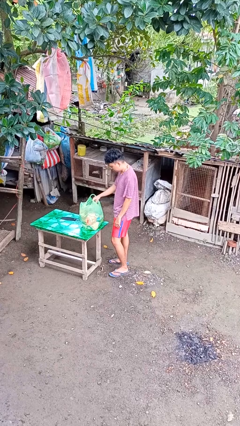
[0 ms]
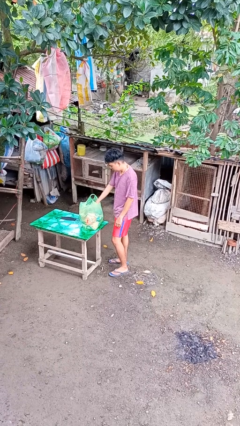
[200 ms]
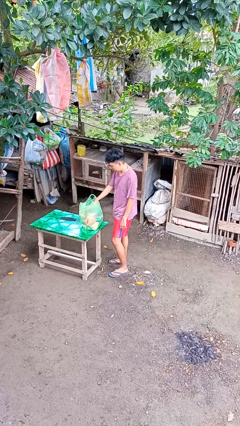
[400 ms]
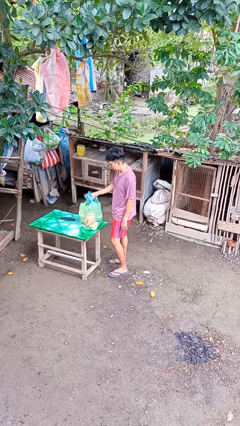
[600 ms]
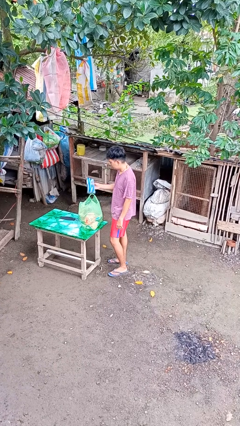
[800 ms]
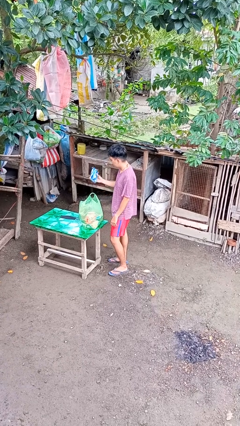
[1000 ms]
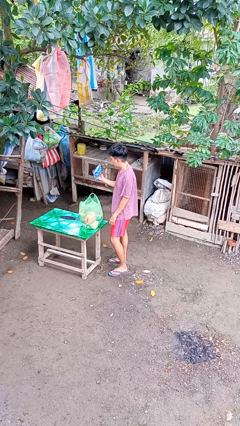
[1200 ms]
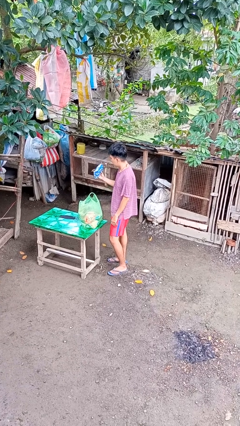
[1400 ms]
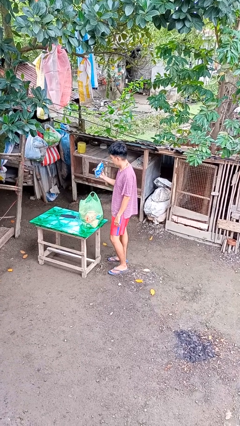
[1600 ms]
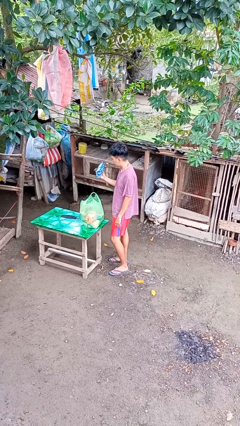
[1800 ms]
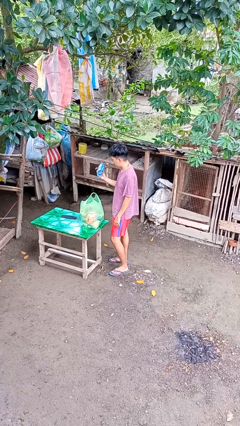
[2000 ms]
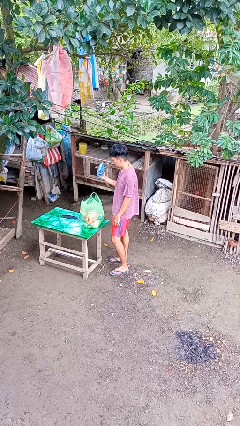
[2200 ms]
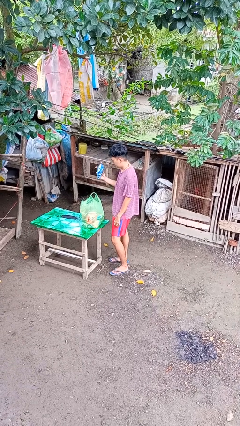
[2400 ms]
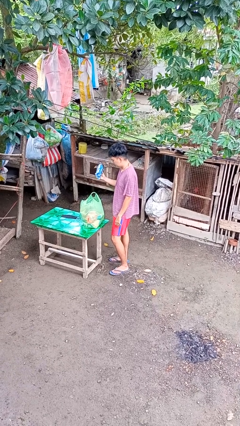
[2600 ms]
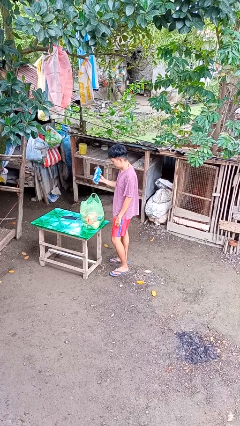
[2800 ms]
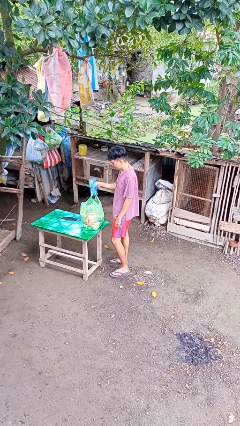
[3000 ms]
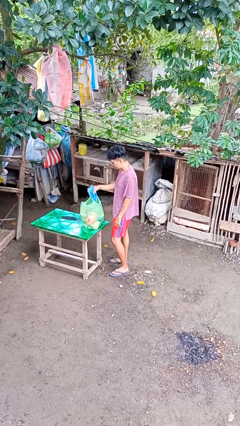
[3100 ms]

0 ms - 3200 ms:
person takes object from bag

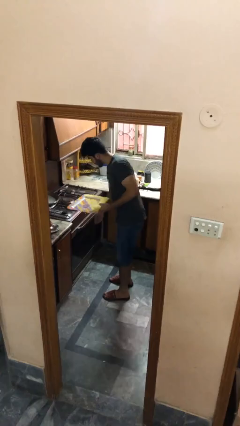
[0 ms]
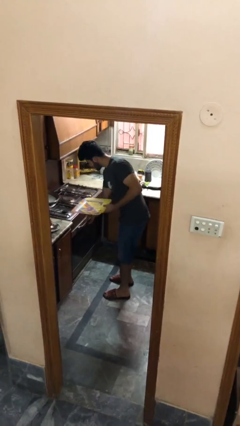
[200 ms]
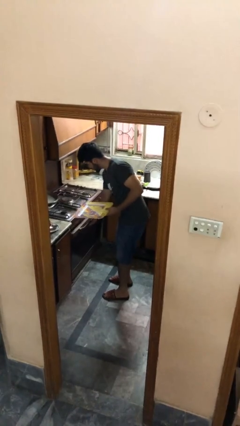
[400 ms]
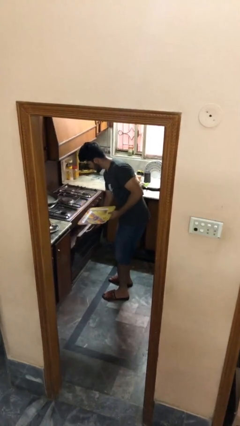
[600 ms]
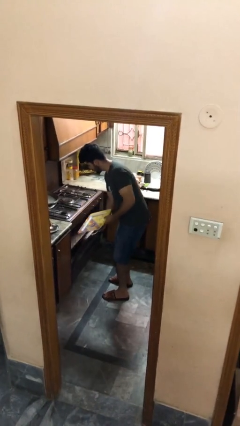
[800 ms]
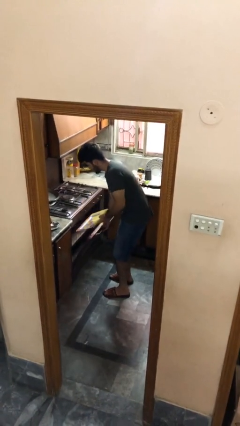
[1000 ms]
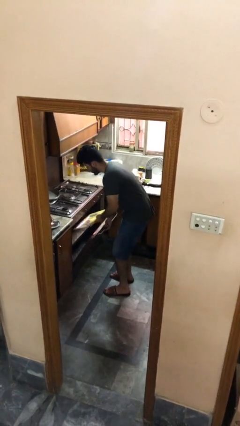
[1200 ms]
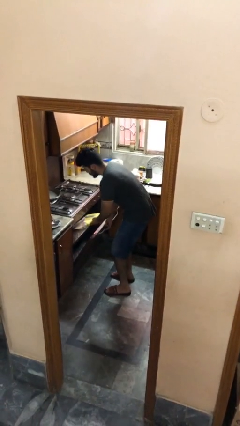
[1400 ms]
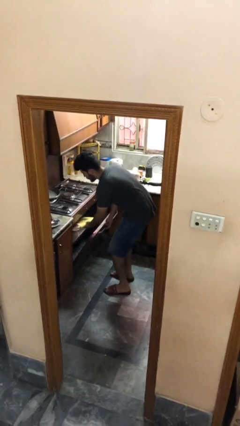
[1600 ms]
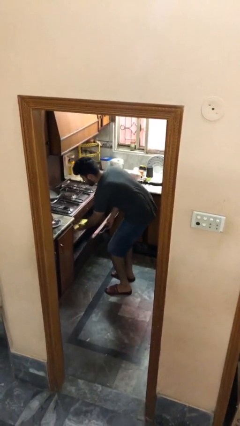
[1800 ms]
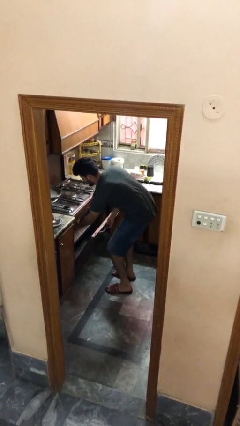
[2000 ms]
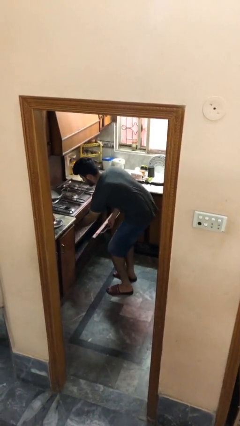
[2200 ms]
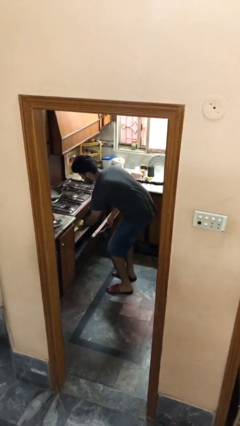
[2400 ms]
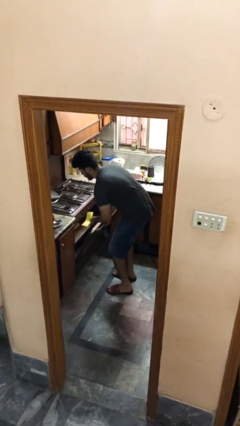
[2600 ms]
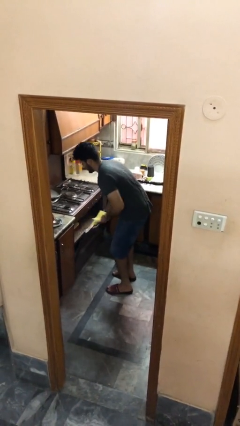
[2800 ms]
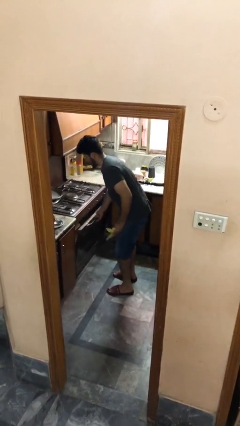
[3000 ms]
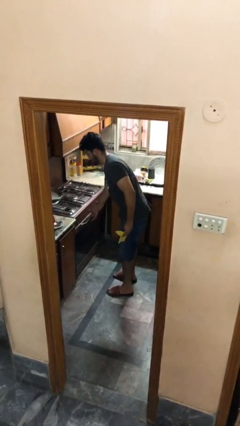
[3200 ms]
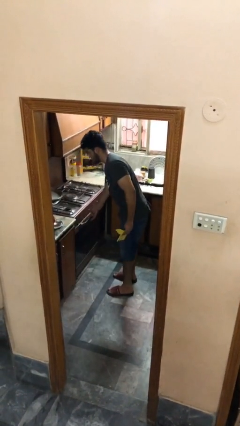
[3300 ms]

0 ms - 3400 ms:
person puts object into oven

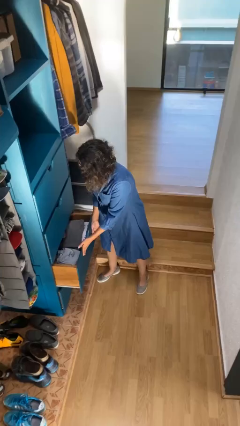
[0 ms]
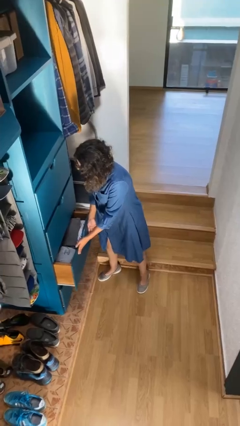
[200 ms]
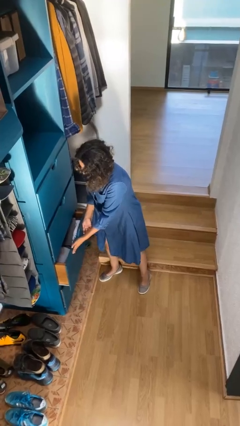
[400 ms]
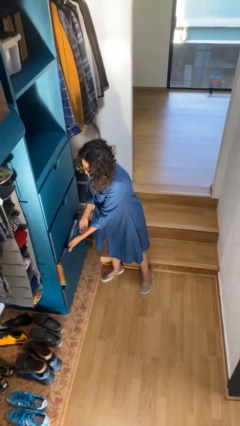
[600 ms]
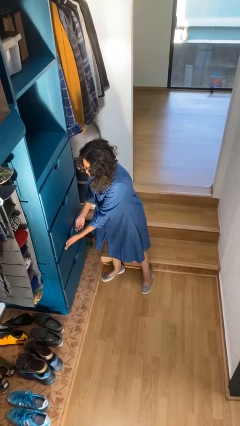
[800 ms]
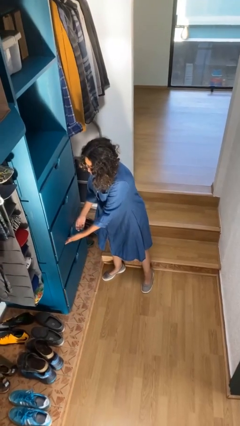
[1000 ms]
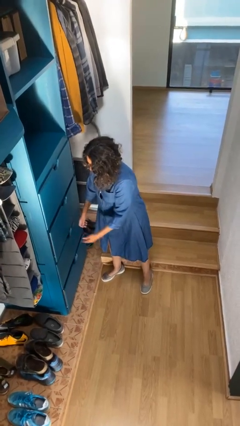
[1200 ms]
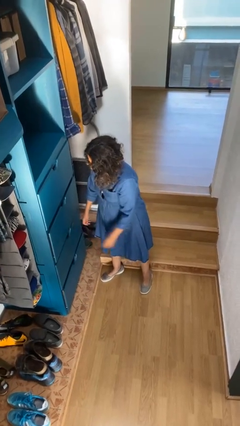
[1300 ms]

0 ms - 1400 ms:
person closes dresser drawer

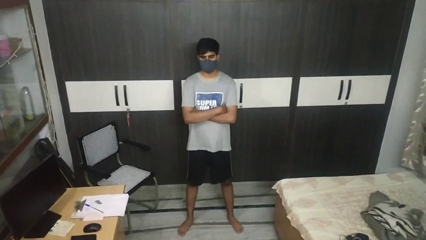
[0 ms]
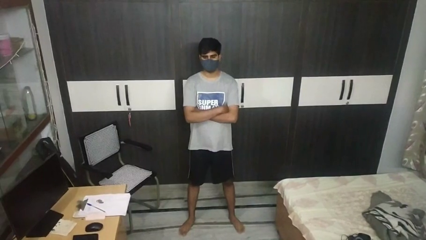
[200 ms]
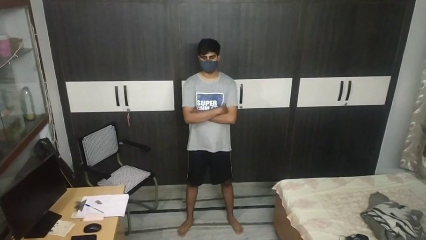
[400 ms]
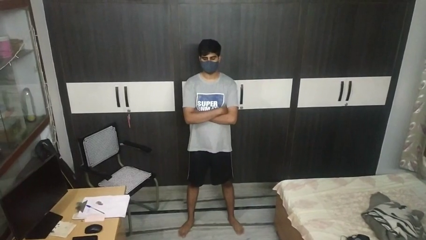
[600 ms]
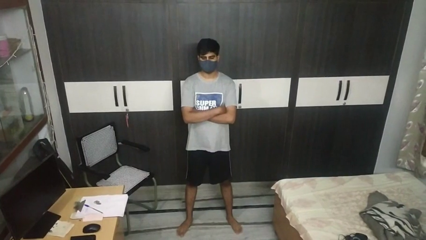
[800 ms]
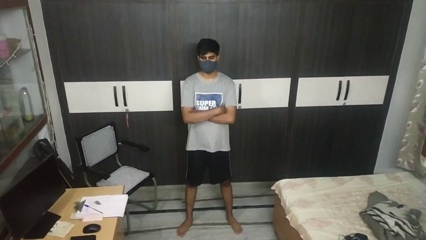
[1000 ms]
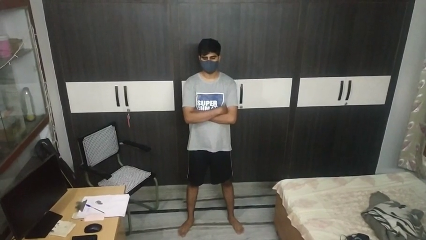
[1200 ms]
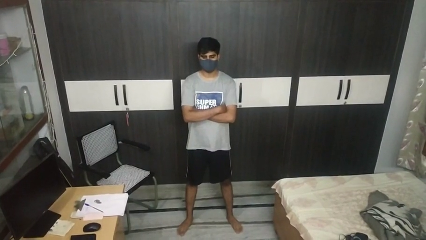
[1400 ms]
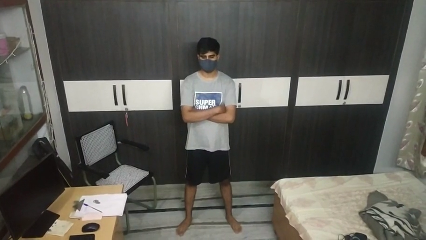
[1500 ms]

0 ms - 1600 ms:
person crosses arms

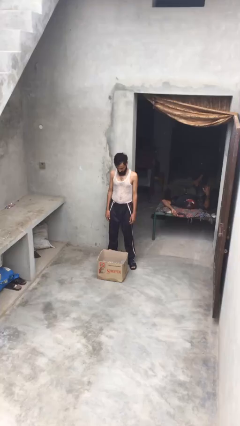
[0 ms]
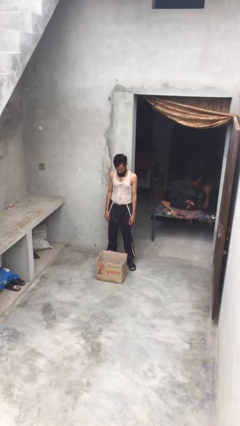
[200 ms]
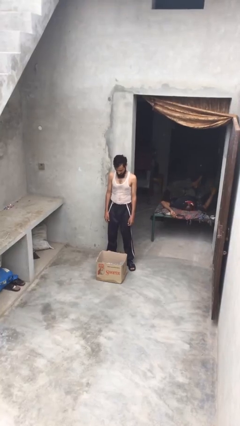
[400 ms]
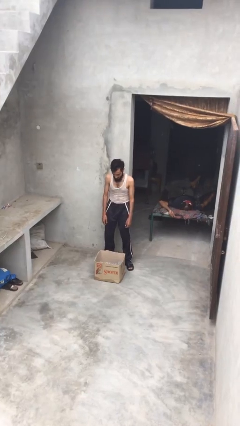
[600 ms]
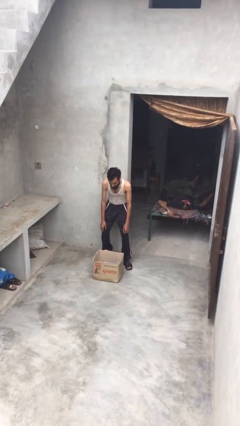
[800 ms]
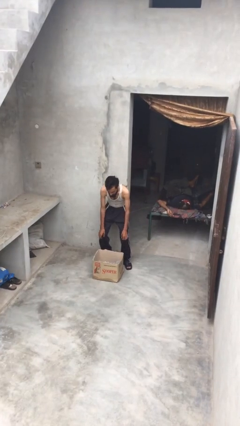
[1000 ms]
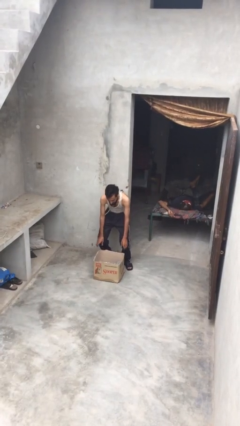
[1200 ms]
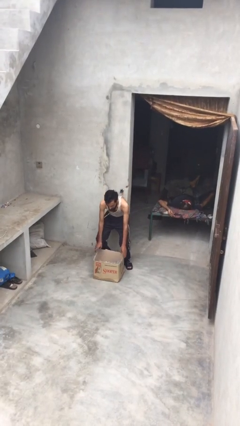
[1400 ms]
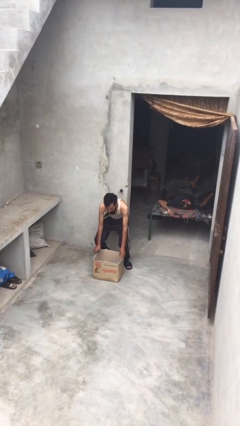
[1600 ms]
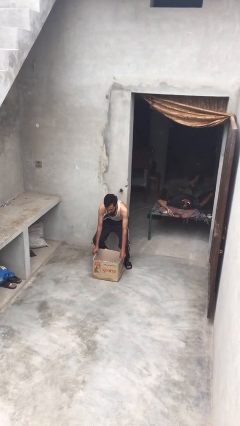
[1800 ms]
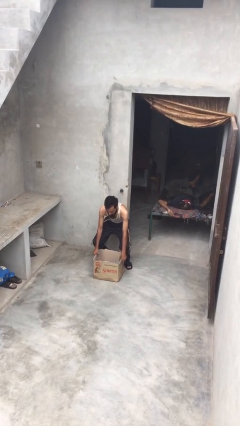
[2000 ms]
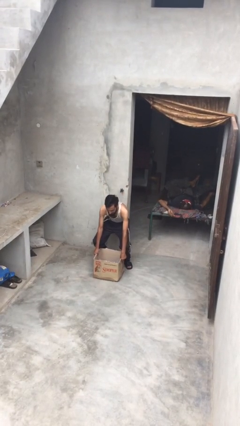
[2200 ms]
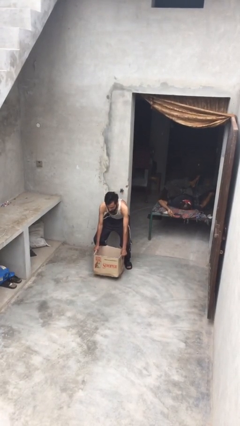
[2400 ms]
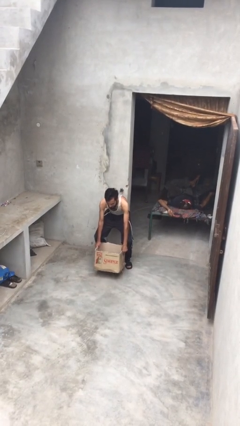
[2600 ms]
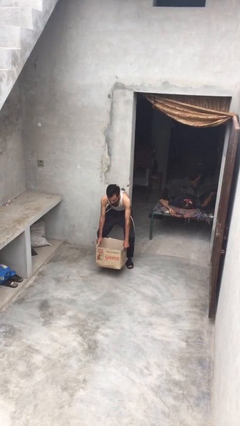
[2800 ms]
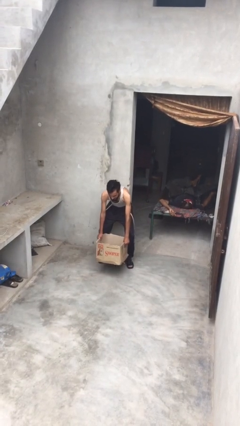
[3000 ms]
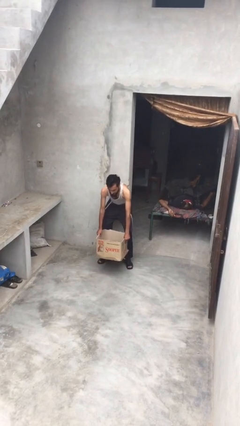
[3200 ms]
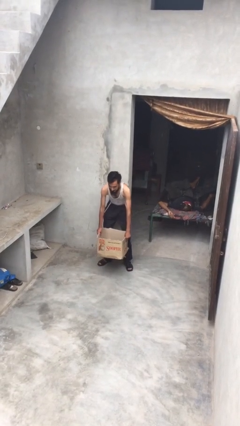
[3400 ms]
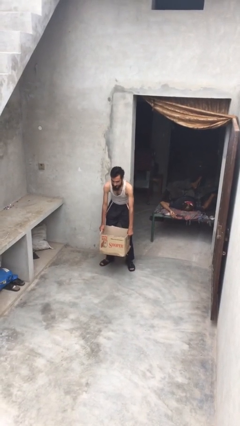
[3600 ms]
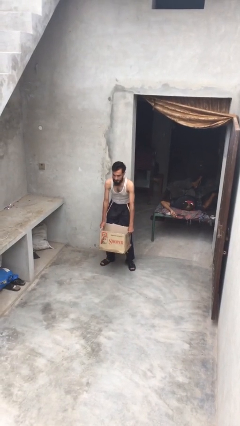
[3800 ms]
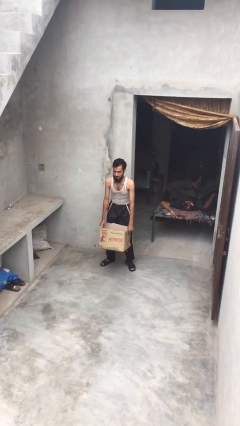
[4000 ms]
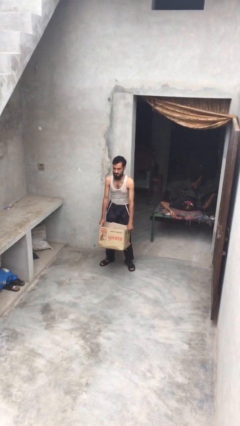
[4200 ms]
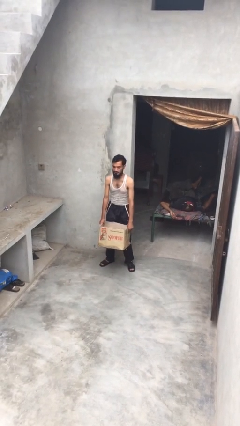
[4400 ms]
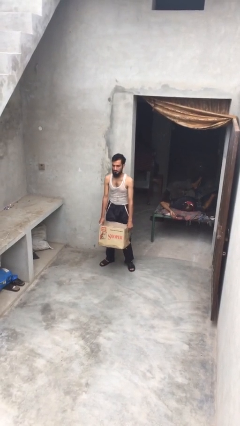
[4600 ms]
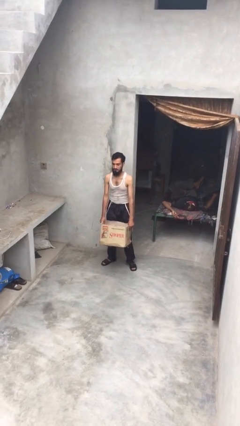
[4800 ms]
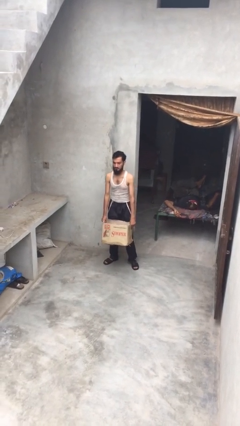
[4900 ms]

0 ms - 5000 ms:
person picks up object from floor

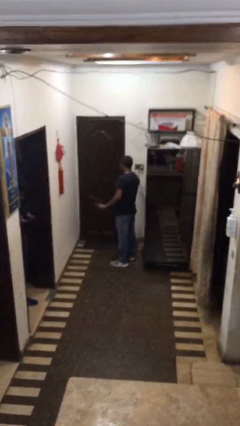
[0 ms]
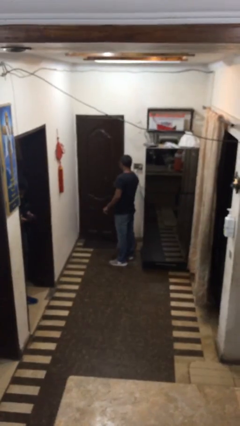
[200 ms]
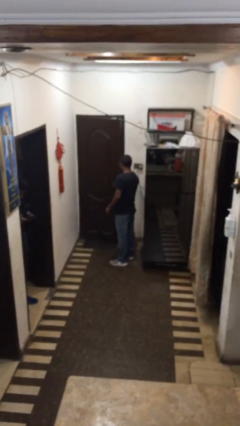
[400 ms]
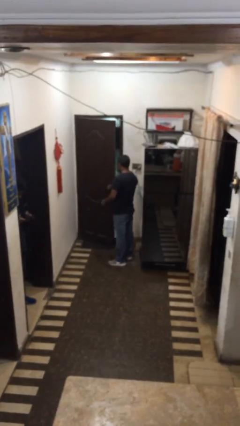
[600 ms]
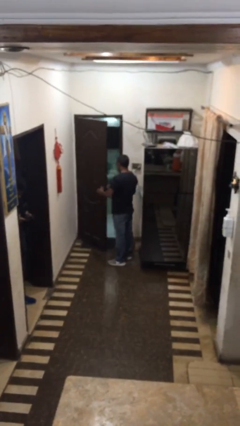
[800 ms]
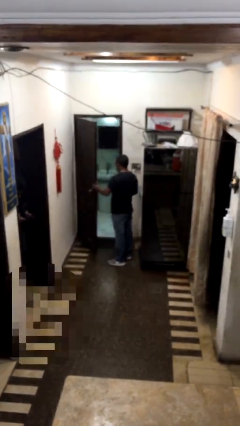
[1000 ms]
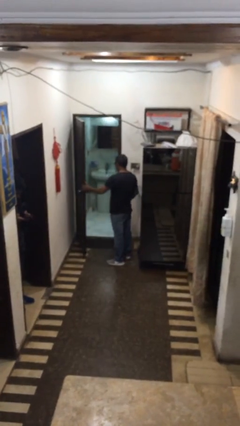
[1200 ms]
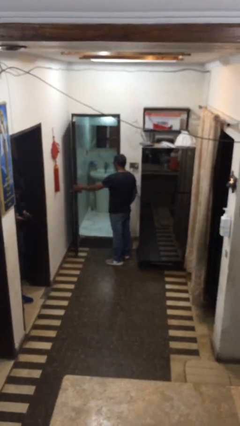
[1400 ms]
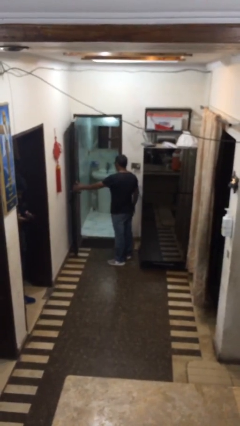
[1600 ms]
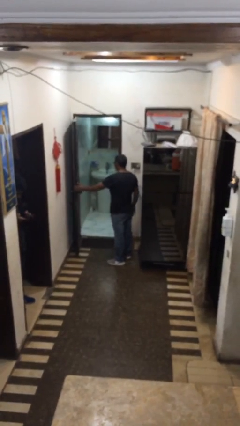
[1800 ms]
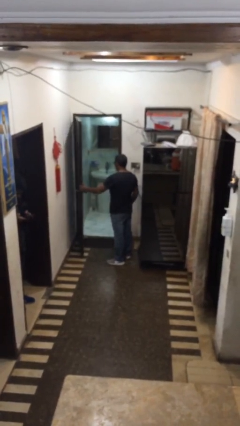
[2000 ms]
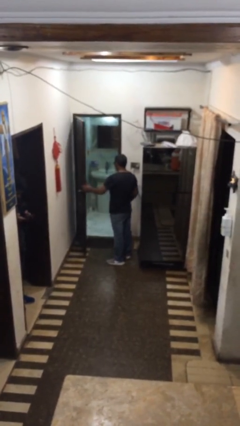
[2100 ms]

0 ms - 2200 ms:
person opens facility door

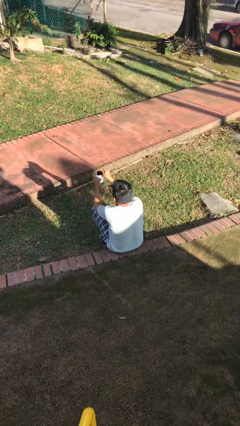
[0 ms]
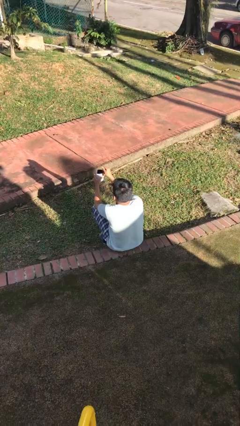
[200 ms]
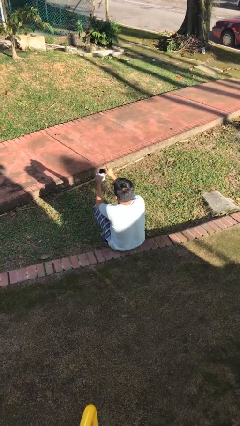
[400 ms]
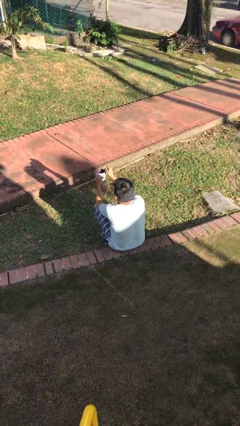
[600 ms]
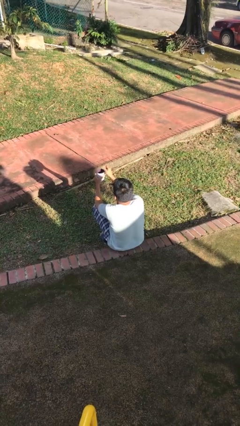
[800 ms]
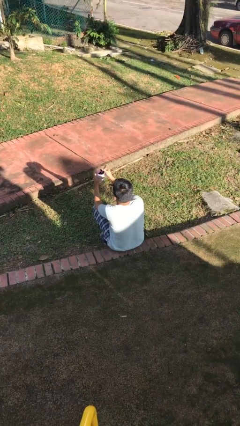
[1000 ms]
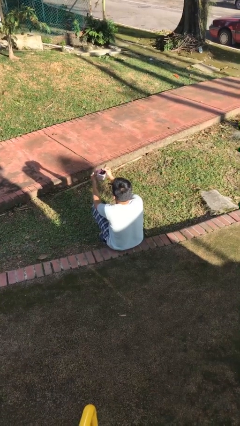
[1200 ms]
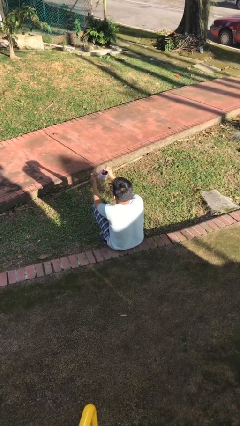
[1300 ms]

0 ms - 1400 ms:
person stirs mug
